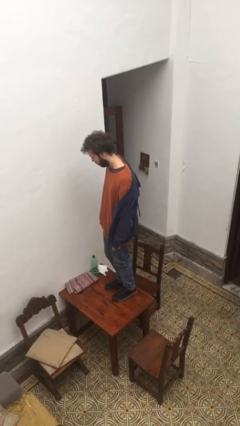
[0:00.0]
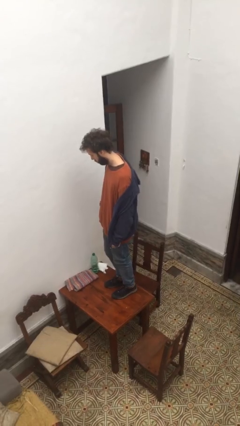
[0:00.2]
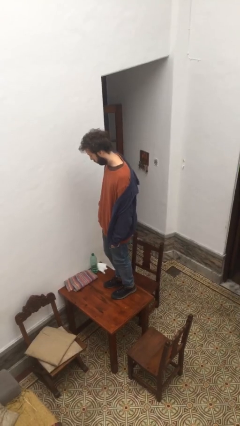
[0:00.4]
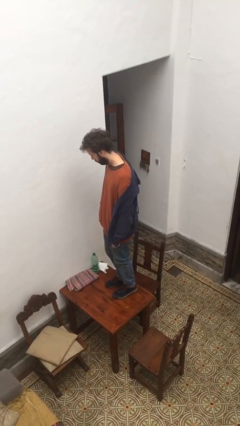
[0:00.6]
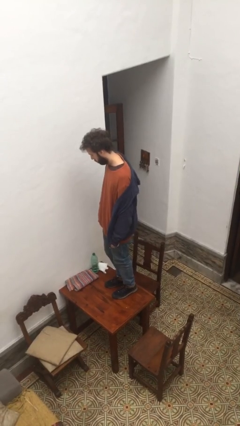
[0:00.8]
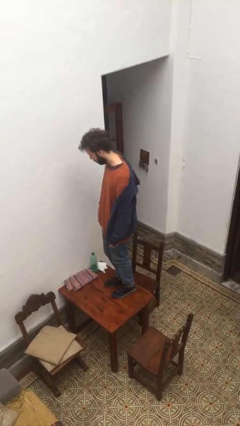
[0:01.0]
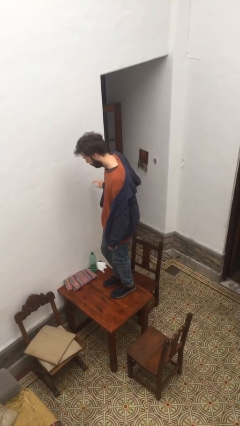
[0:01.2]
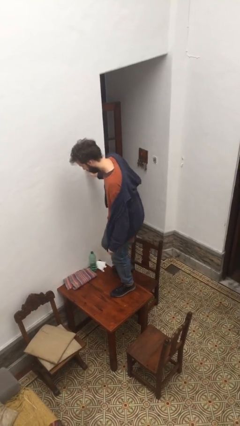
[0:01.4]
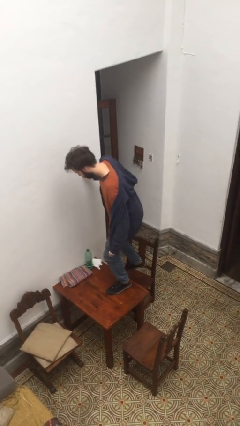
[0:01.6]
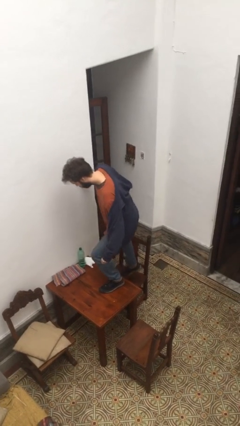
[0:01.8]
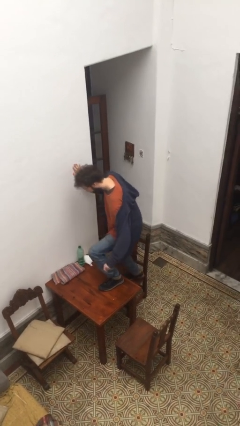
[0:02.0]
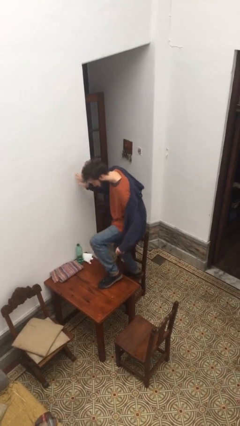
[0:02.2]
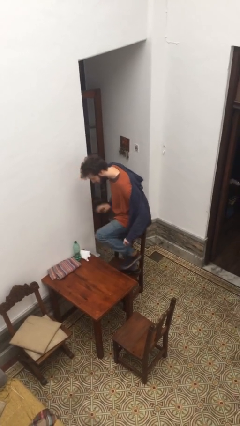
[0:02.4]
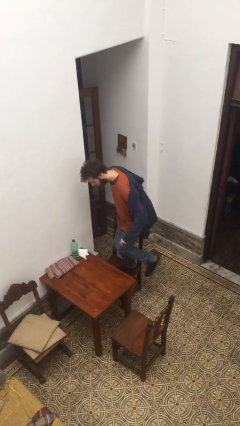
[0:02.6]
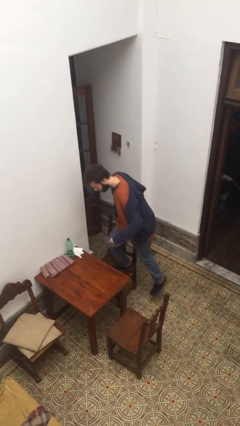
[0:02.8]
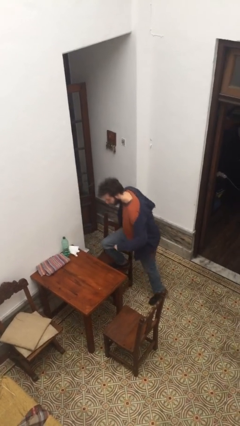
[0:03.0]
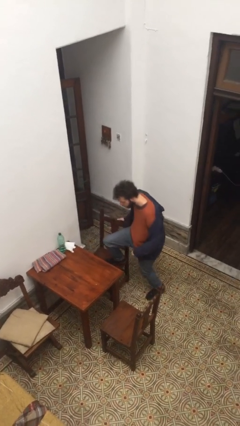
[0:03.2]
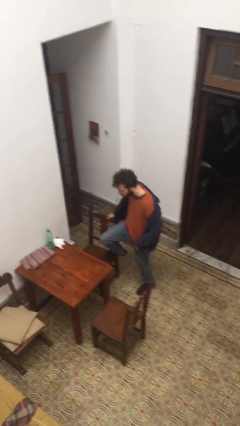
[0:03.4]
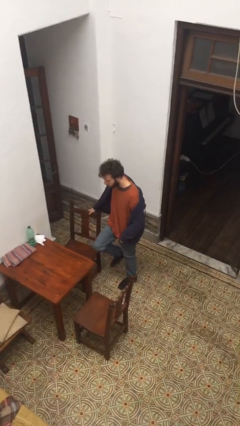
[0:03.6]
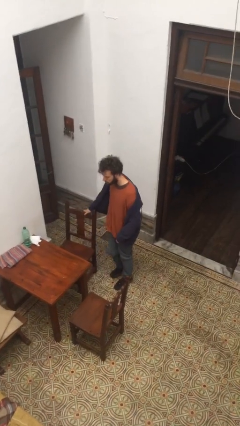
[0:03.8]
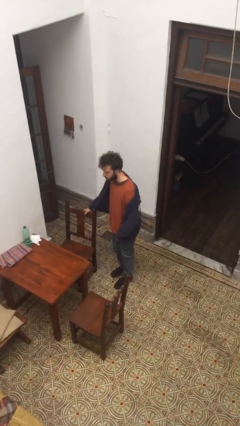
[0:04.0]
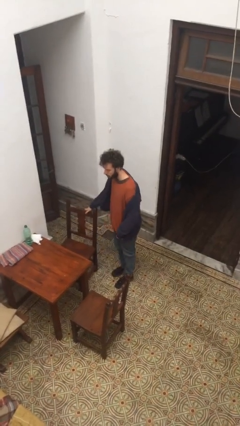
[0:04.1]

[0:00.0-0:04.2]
person climbs off table

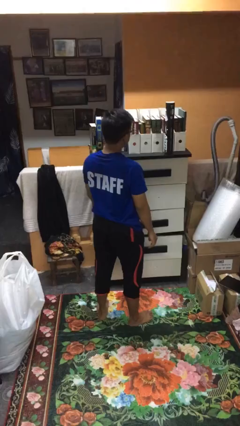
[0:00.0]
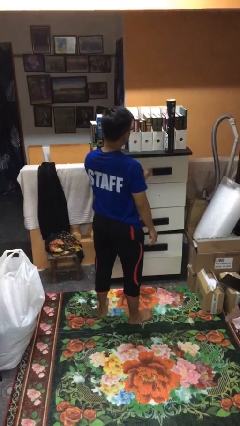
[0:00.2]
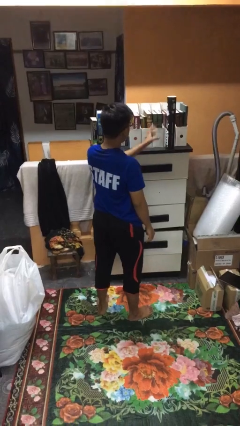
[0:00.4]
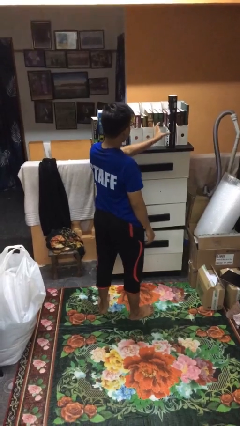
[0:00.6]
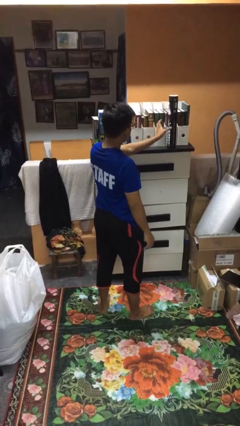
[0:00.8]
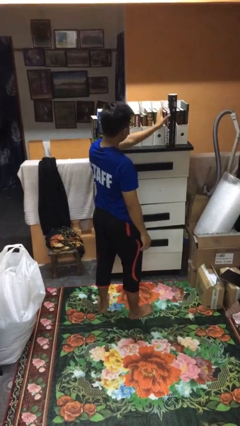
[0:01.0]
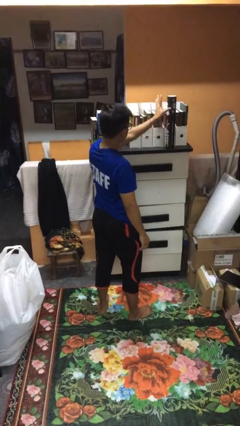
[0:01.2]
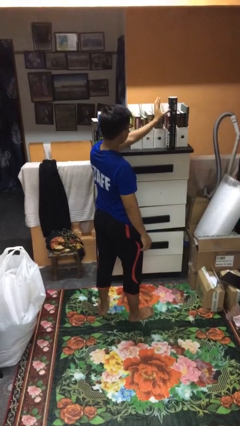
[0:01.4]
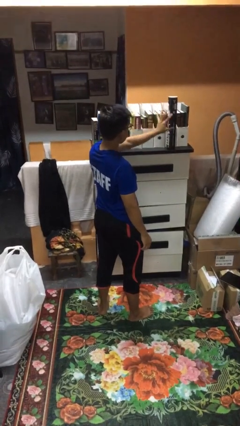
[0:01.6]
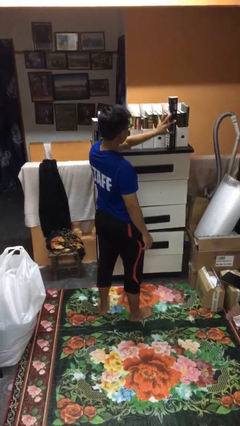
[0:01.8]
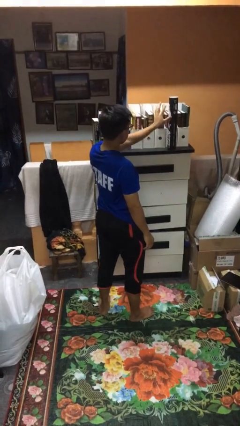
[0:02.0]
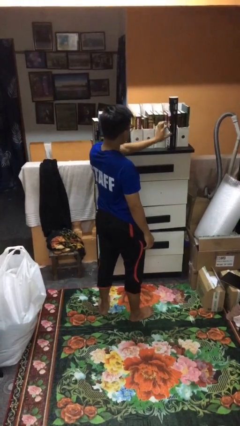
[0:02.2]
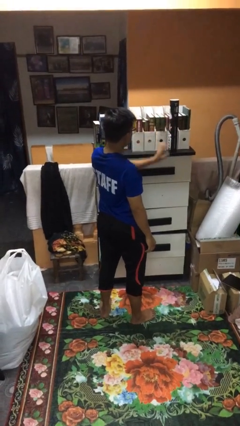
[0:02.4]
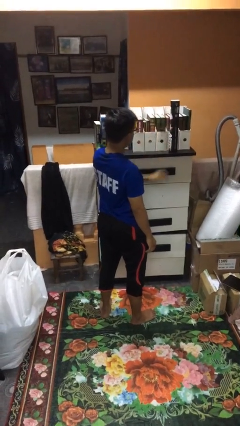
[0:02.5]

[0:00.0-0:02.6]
person waves hand over object

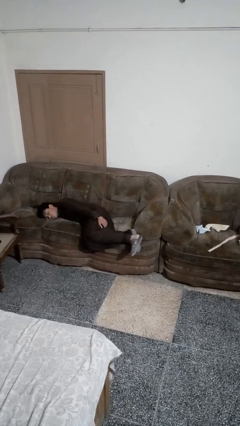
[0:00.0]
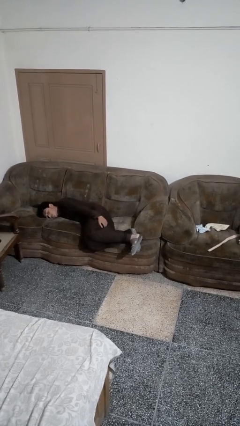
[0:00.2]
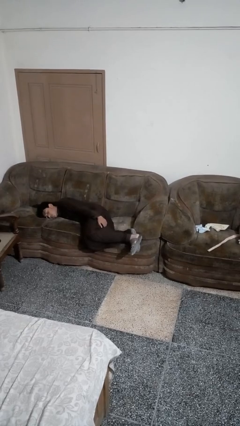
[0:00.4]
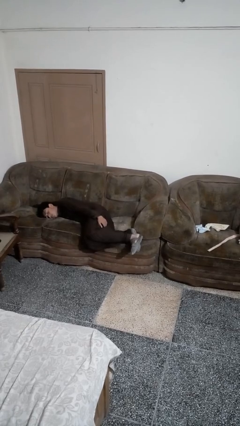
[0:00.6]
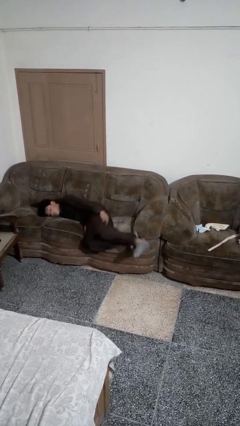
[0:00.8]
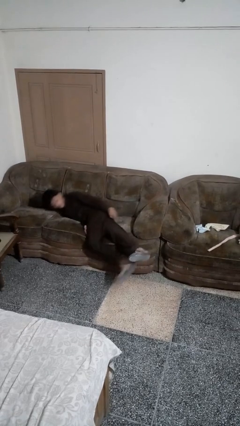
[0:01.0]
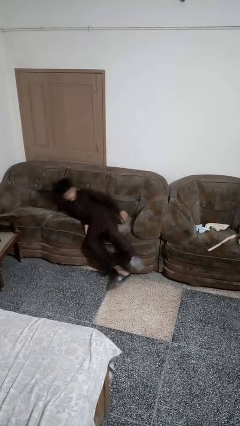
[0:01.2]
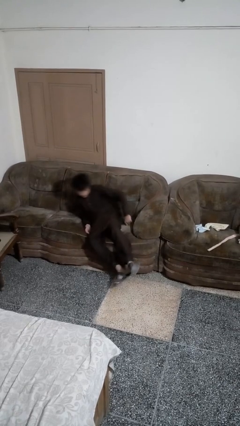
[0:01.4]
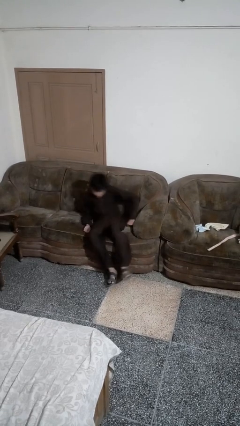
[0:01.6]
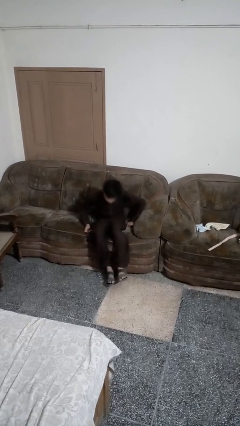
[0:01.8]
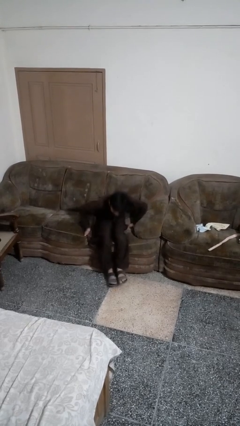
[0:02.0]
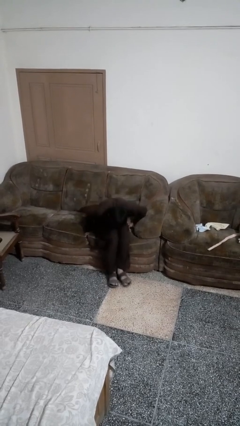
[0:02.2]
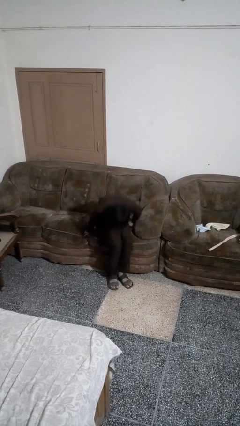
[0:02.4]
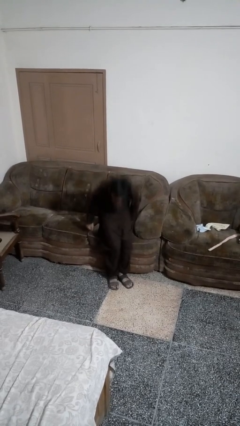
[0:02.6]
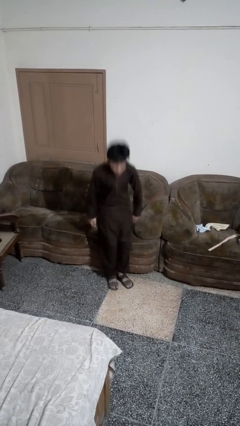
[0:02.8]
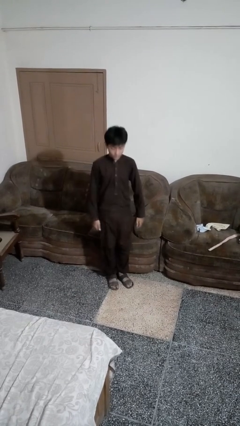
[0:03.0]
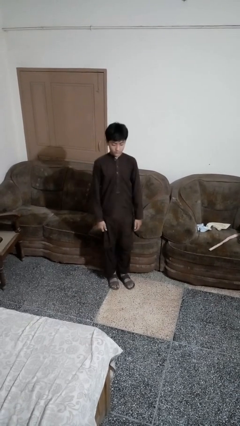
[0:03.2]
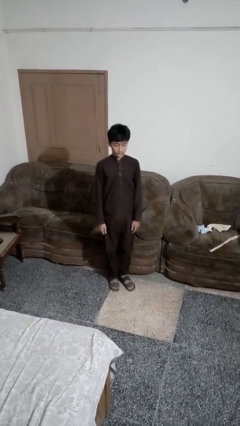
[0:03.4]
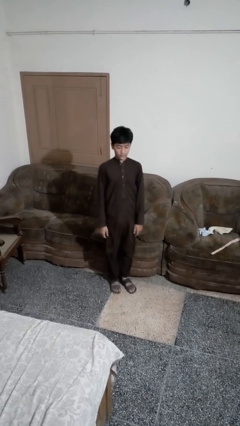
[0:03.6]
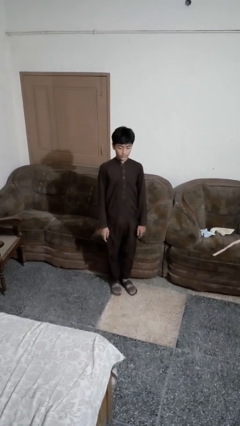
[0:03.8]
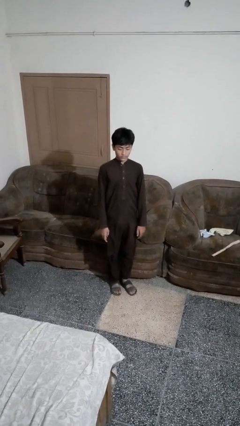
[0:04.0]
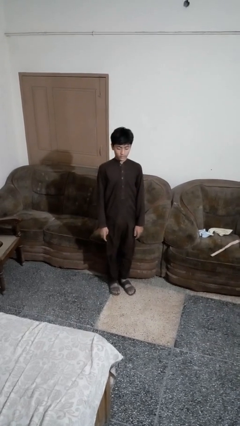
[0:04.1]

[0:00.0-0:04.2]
person stands up

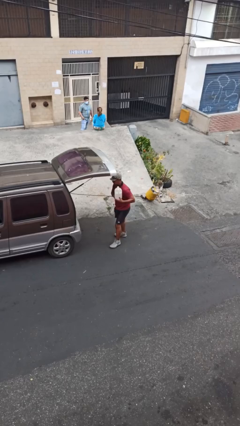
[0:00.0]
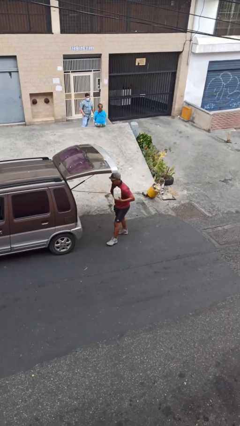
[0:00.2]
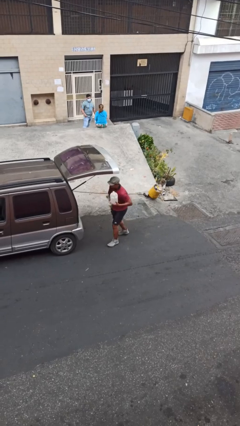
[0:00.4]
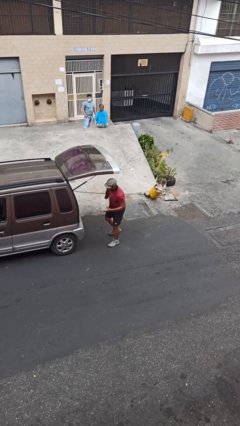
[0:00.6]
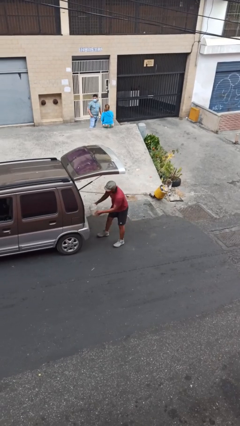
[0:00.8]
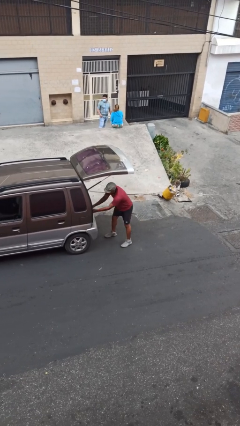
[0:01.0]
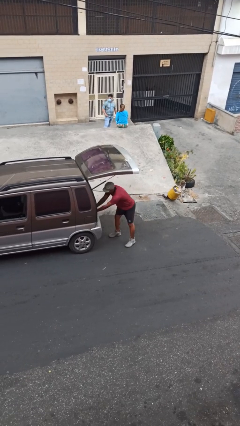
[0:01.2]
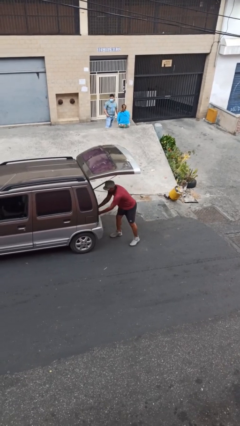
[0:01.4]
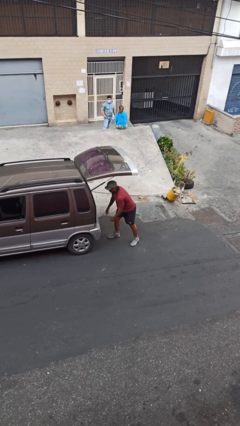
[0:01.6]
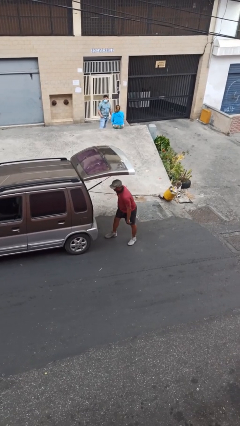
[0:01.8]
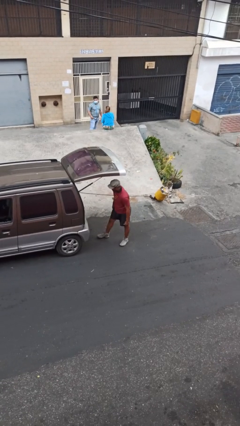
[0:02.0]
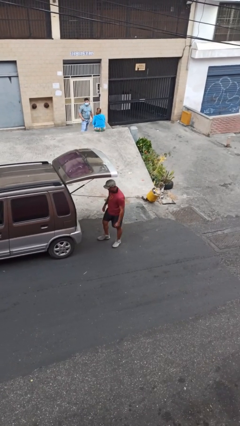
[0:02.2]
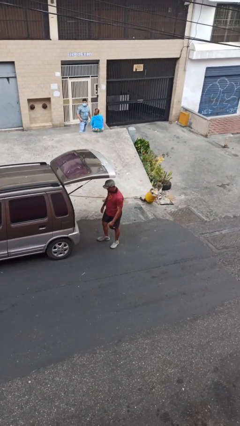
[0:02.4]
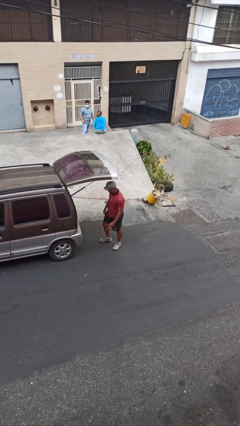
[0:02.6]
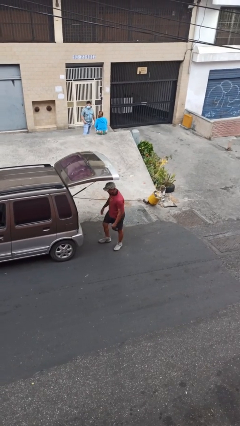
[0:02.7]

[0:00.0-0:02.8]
person loads car

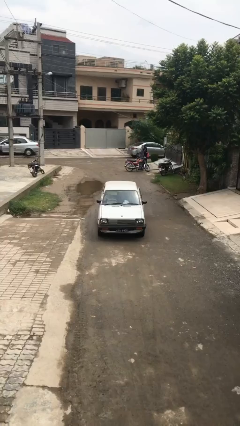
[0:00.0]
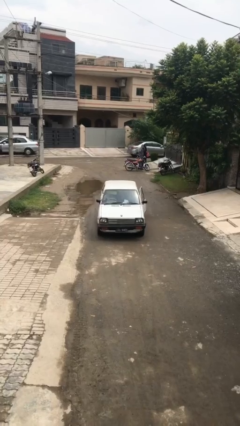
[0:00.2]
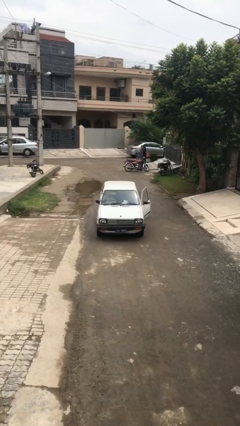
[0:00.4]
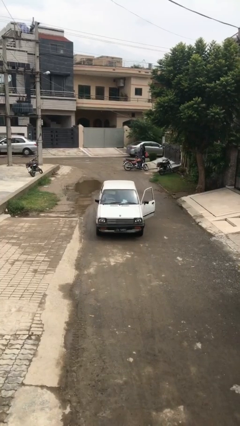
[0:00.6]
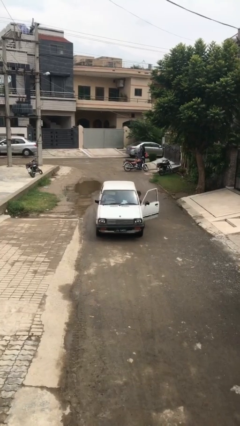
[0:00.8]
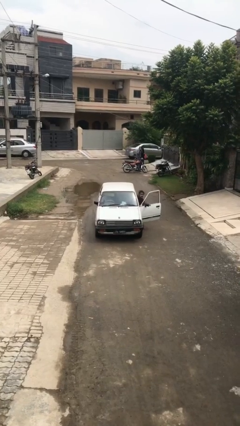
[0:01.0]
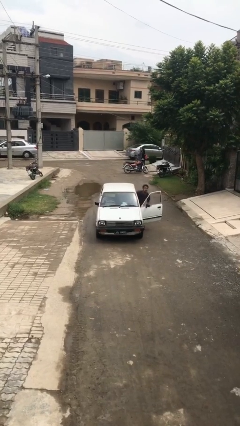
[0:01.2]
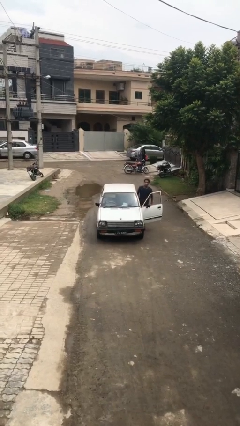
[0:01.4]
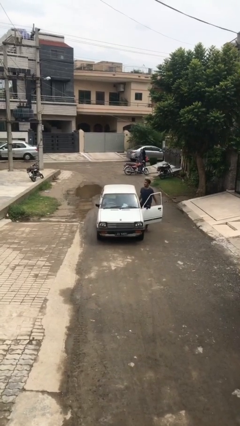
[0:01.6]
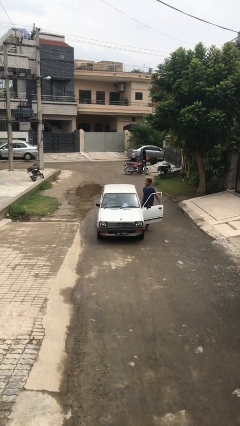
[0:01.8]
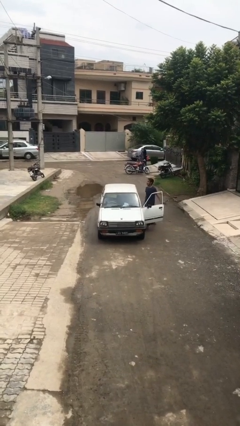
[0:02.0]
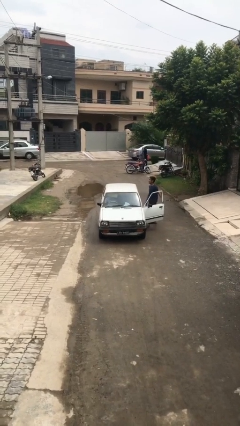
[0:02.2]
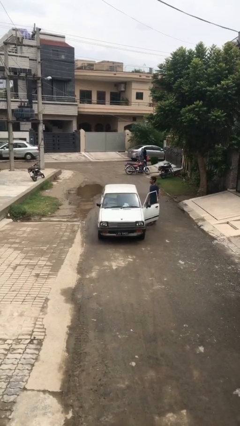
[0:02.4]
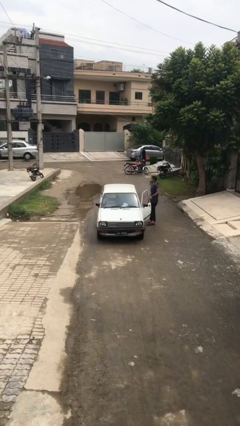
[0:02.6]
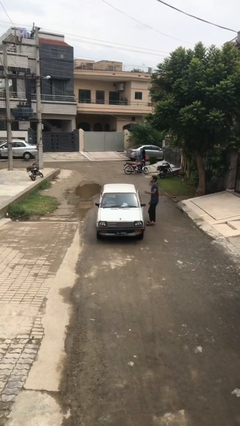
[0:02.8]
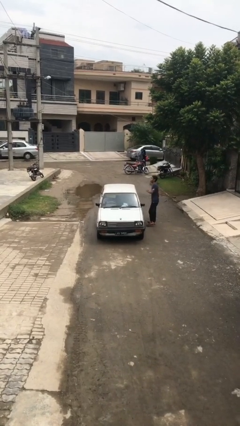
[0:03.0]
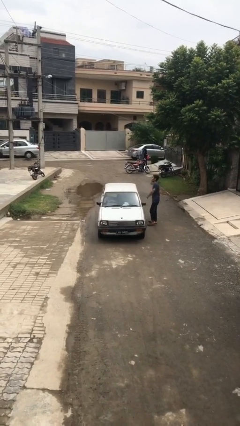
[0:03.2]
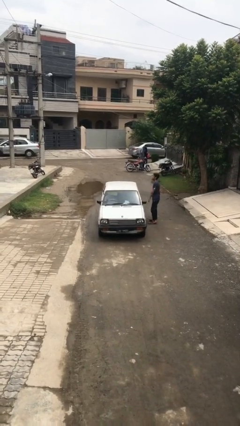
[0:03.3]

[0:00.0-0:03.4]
car drops off person

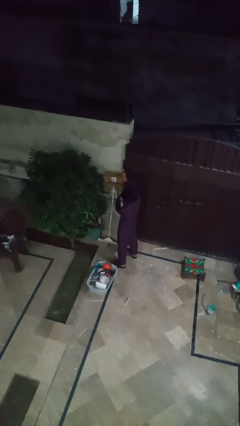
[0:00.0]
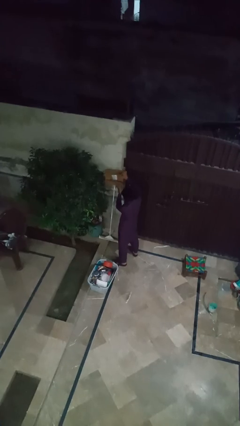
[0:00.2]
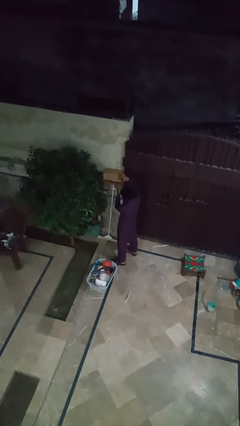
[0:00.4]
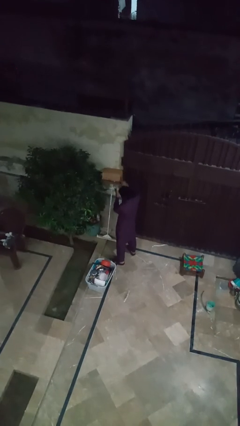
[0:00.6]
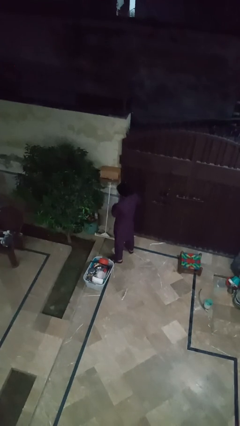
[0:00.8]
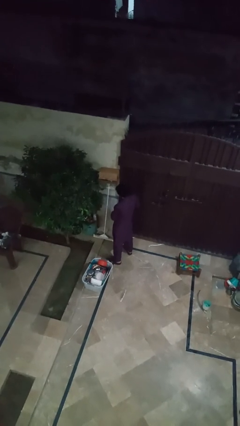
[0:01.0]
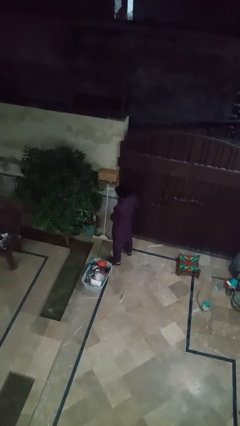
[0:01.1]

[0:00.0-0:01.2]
person closes mailbox
